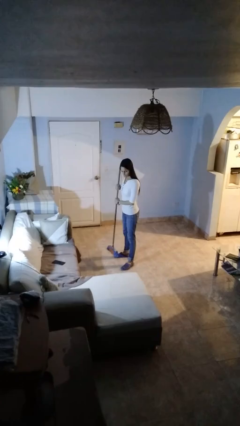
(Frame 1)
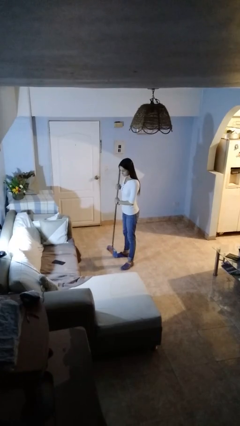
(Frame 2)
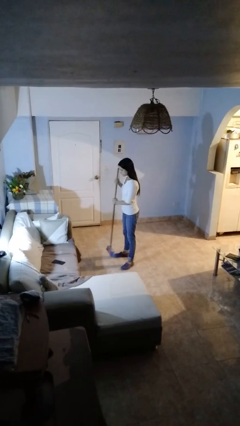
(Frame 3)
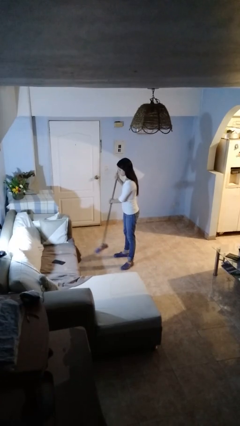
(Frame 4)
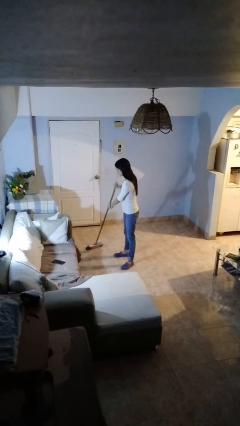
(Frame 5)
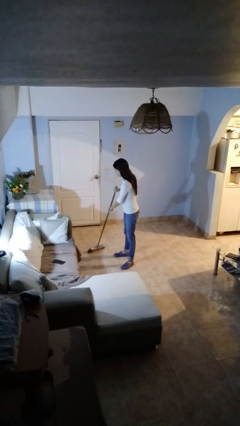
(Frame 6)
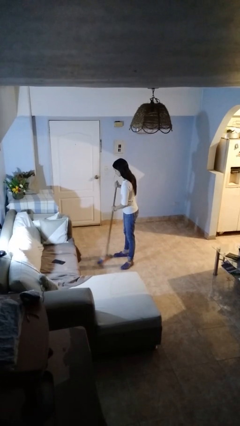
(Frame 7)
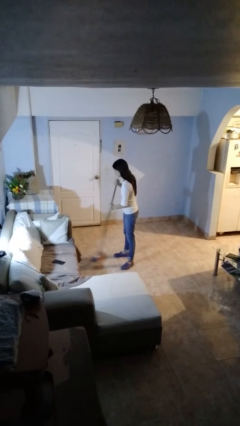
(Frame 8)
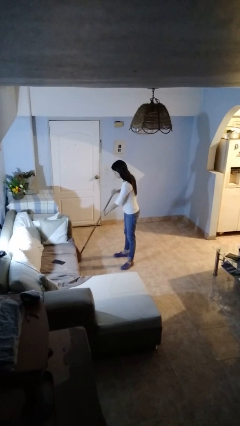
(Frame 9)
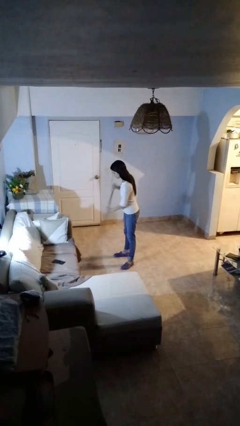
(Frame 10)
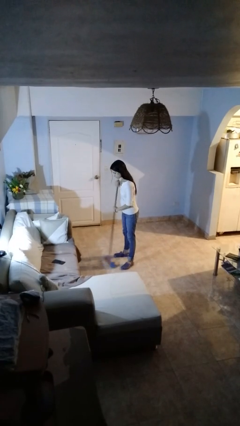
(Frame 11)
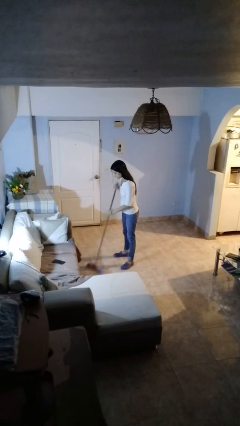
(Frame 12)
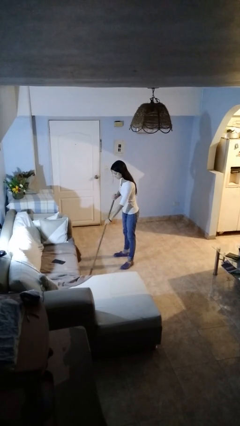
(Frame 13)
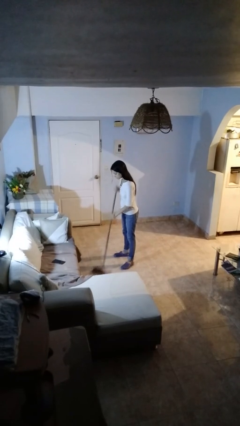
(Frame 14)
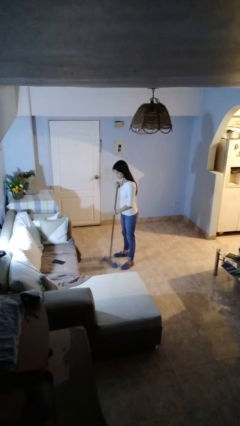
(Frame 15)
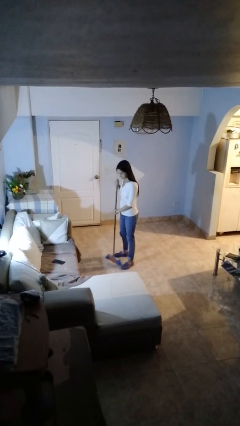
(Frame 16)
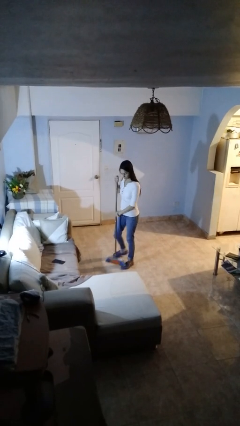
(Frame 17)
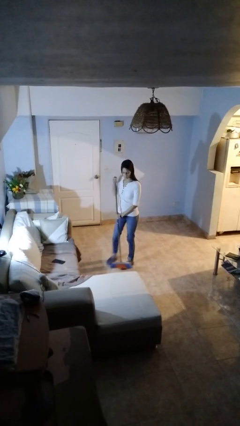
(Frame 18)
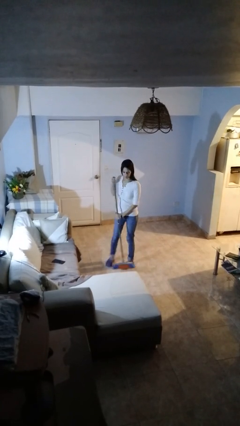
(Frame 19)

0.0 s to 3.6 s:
person sweeps floor

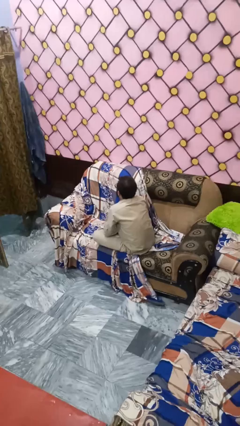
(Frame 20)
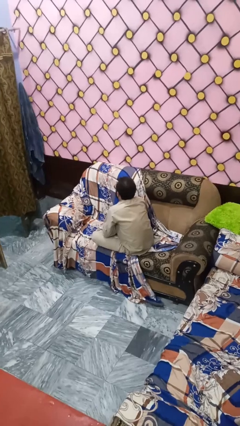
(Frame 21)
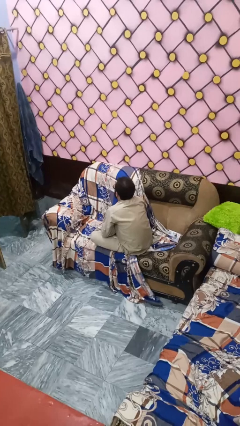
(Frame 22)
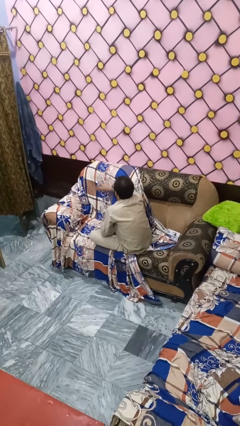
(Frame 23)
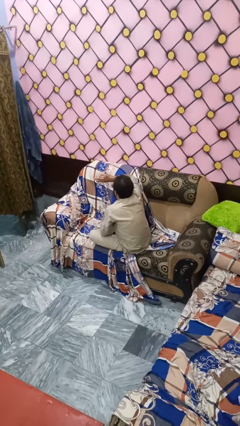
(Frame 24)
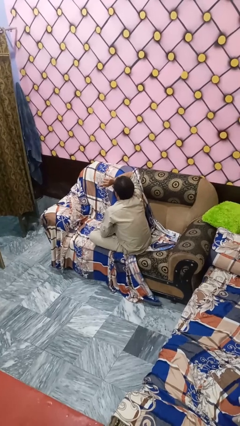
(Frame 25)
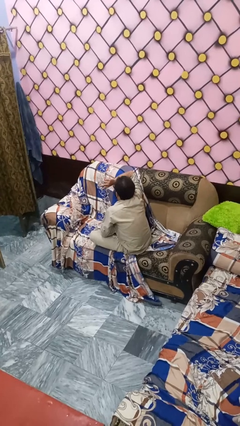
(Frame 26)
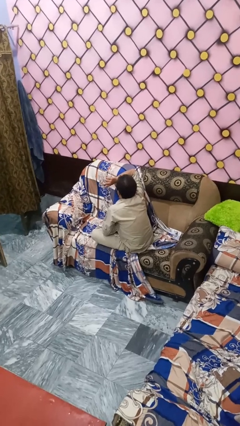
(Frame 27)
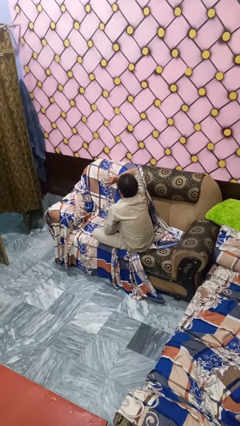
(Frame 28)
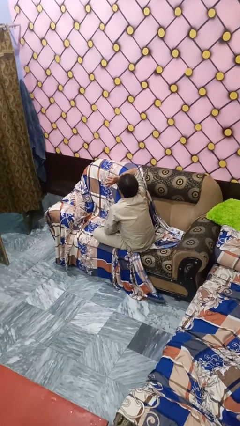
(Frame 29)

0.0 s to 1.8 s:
person gestures watch closely

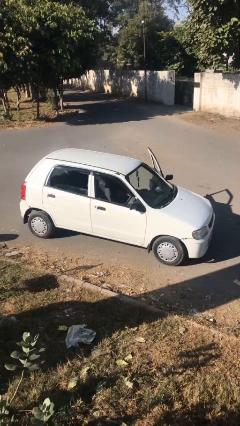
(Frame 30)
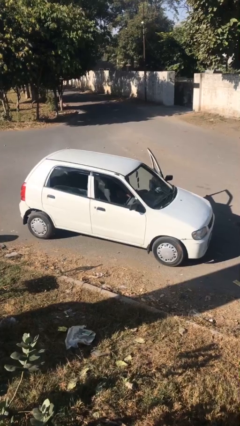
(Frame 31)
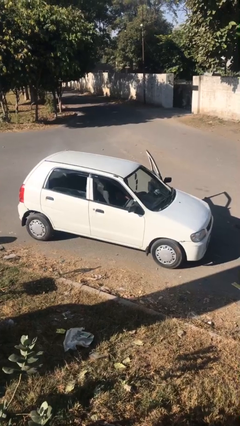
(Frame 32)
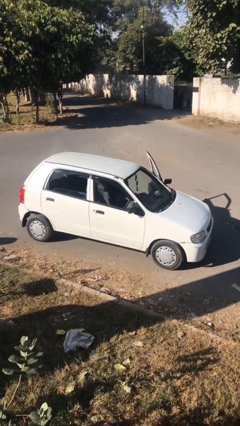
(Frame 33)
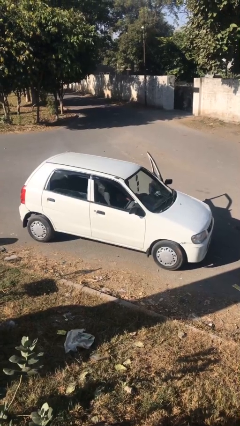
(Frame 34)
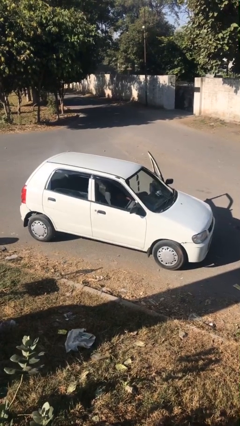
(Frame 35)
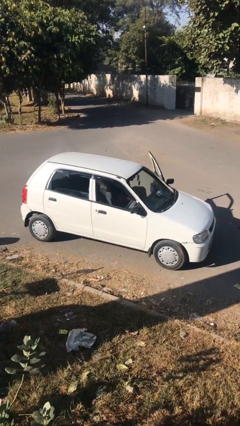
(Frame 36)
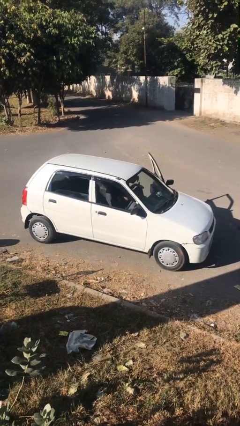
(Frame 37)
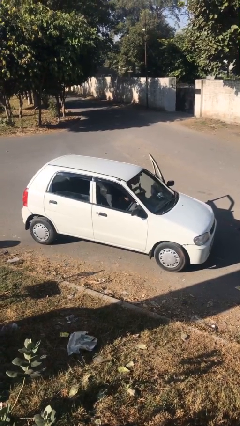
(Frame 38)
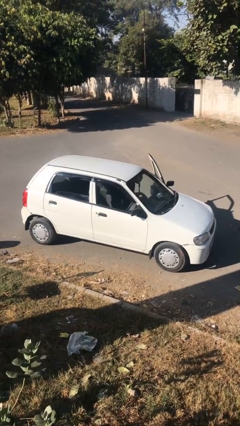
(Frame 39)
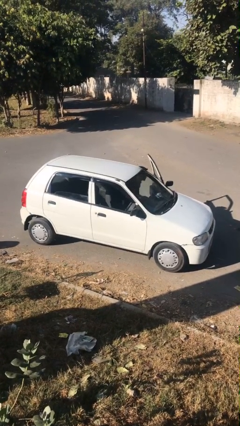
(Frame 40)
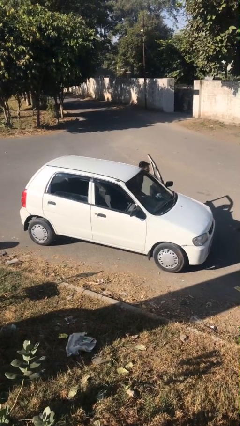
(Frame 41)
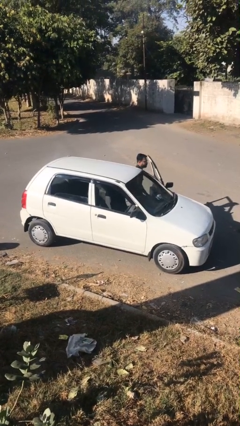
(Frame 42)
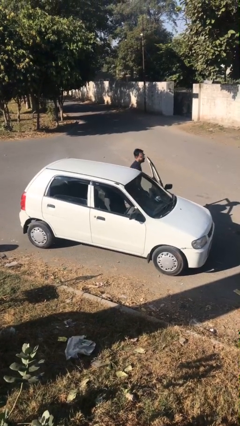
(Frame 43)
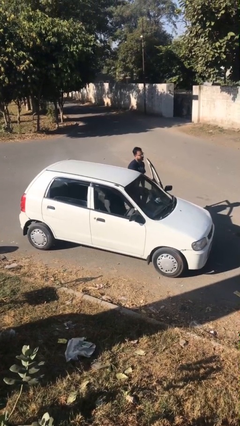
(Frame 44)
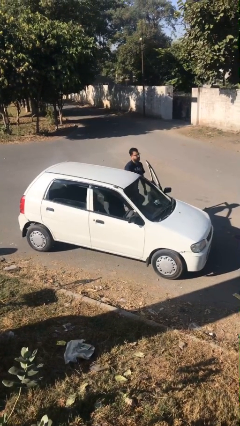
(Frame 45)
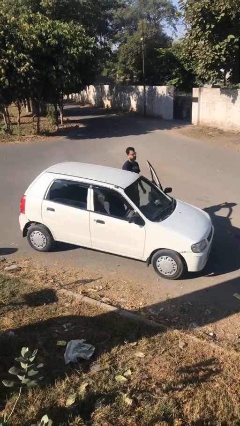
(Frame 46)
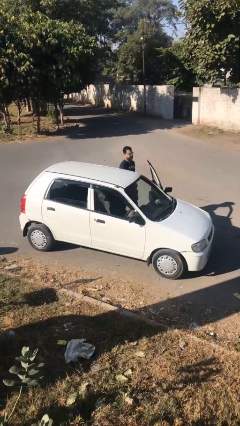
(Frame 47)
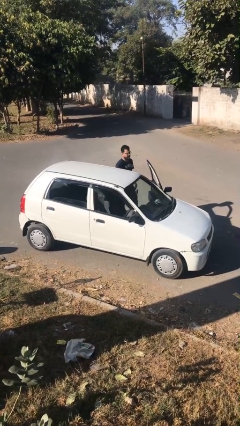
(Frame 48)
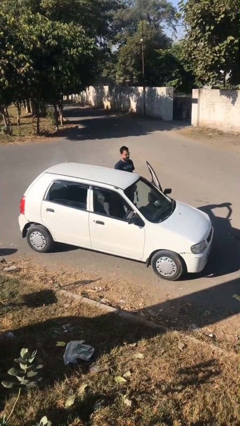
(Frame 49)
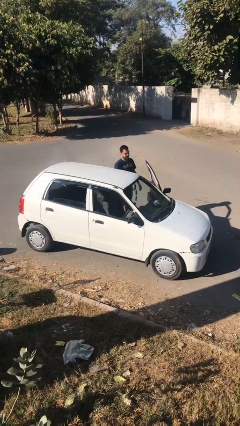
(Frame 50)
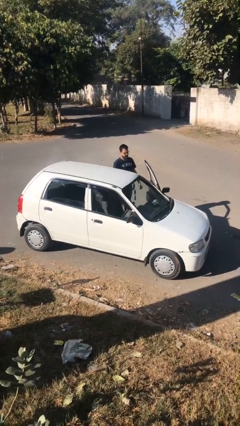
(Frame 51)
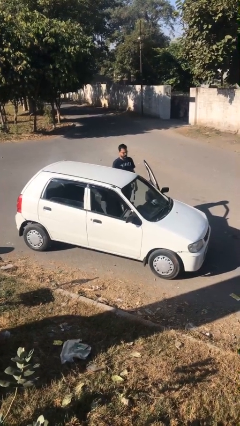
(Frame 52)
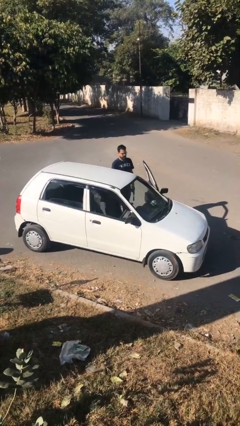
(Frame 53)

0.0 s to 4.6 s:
car drops off person

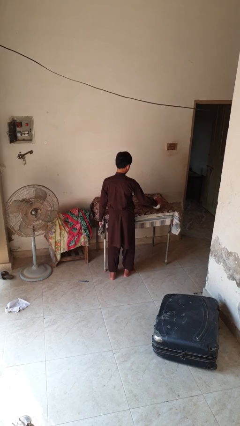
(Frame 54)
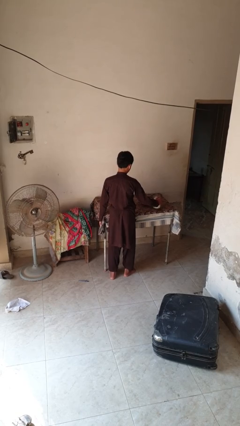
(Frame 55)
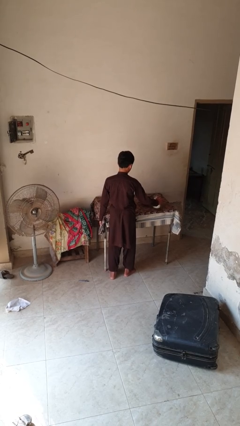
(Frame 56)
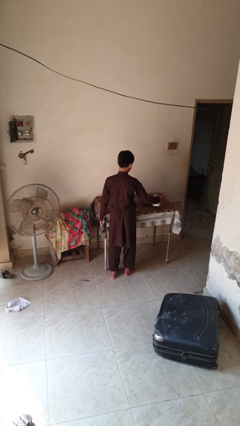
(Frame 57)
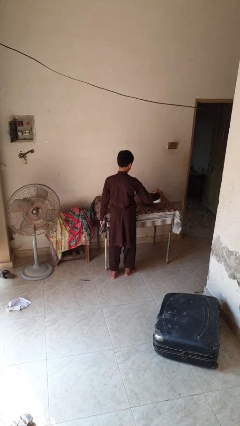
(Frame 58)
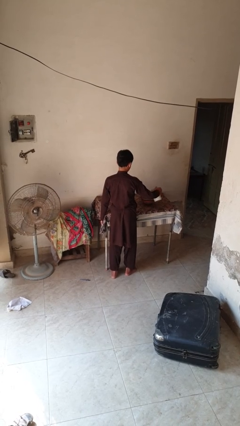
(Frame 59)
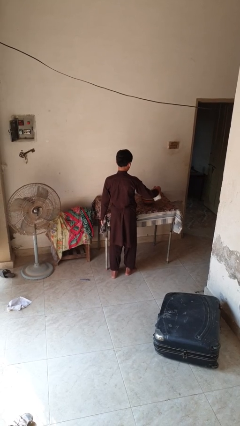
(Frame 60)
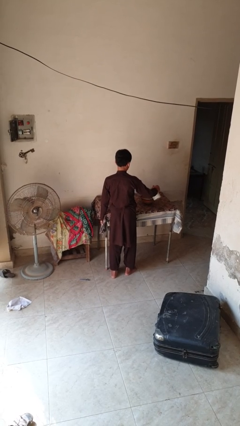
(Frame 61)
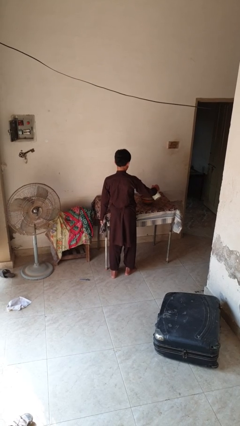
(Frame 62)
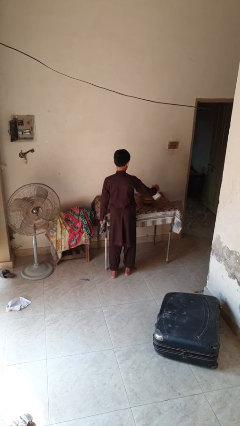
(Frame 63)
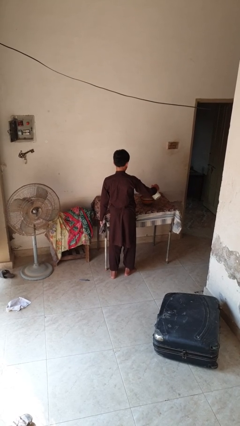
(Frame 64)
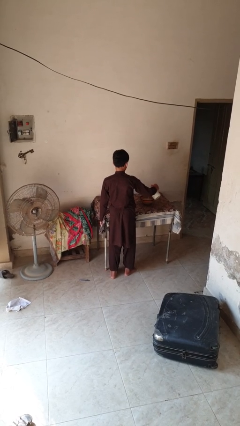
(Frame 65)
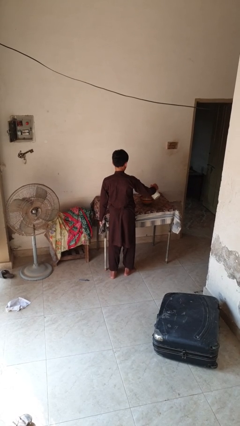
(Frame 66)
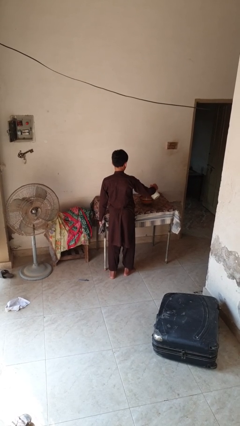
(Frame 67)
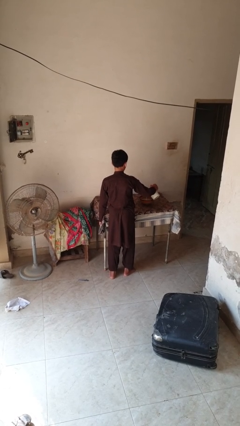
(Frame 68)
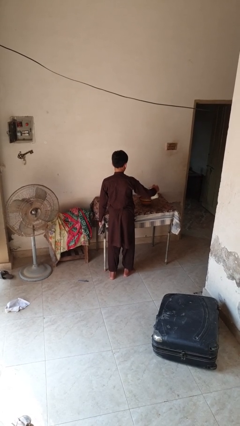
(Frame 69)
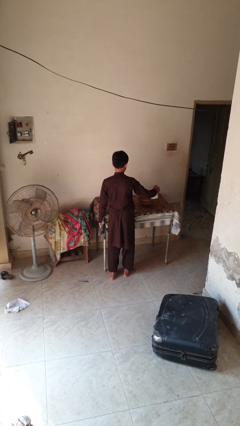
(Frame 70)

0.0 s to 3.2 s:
person pours into bowl

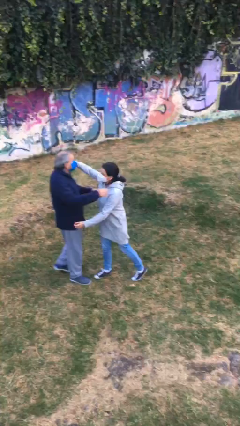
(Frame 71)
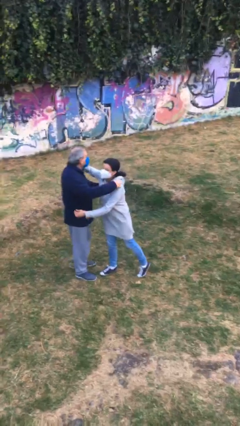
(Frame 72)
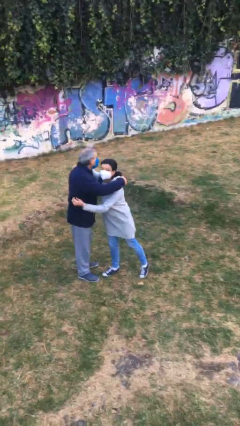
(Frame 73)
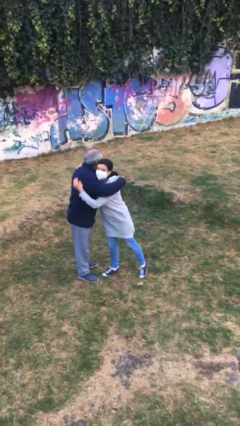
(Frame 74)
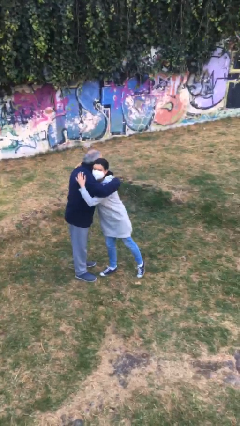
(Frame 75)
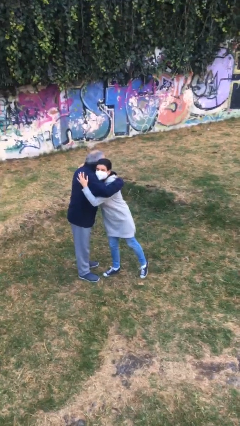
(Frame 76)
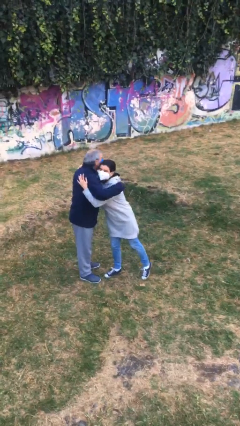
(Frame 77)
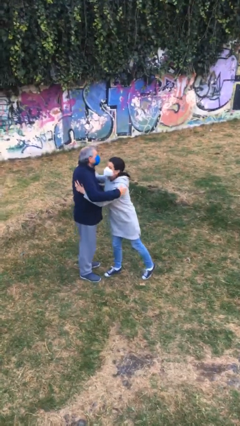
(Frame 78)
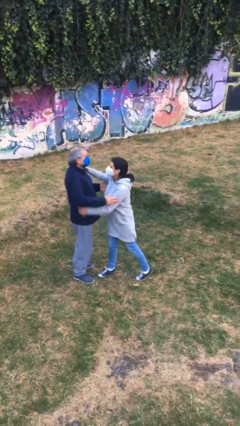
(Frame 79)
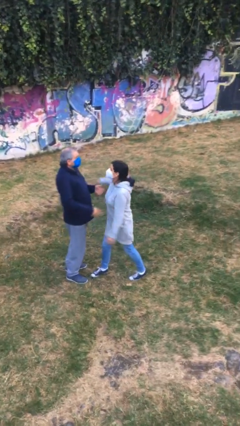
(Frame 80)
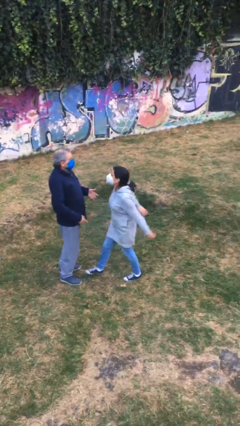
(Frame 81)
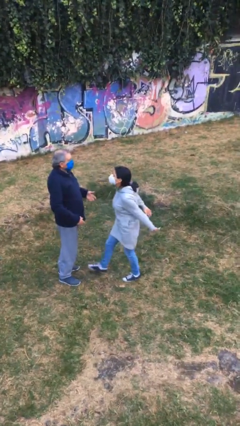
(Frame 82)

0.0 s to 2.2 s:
person embraces person

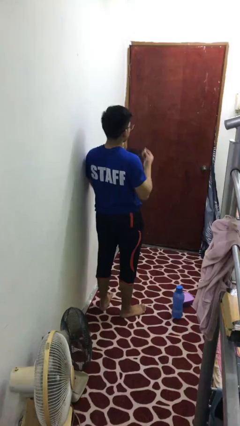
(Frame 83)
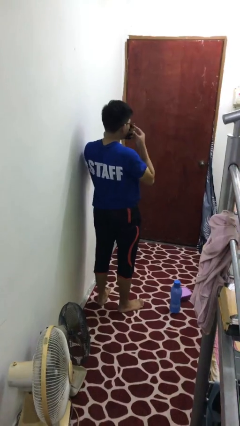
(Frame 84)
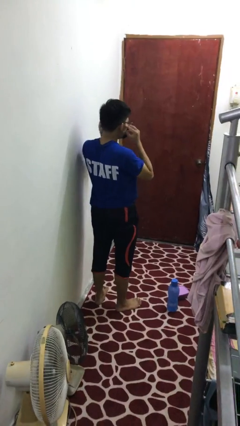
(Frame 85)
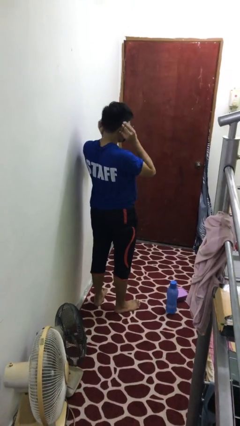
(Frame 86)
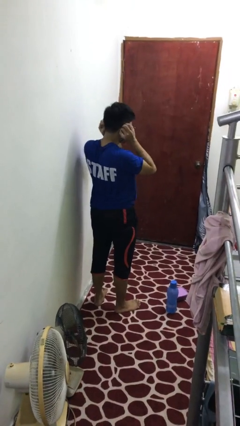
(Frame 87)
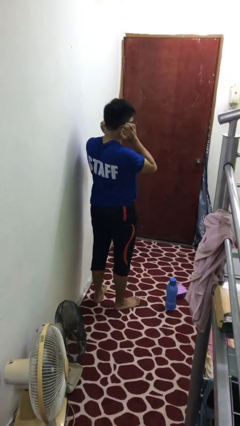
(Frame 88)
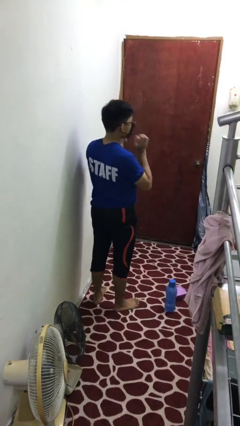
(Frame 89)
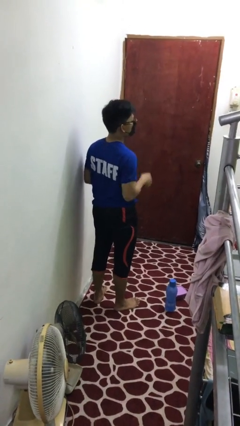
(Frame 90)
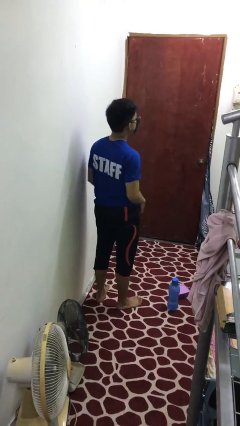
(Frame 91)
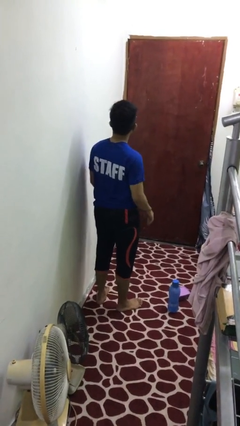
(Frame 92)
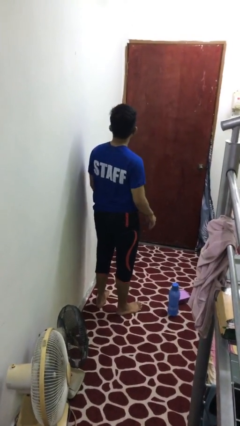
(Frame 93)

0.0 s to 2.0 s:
person puts on facemask

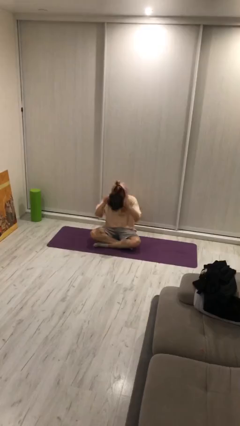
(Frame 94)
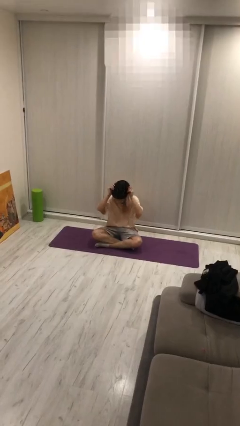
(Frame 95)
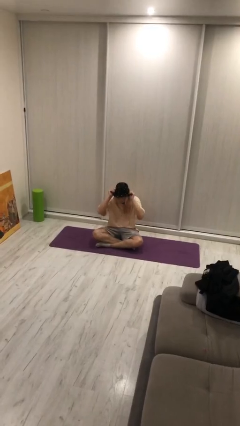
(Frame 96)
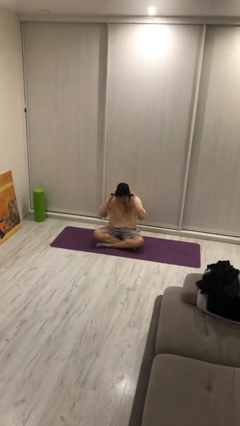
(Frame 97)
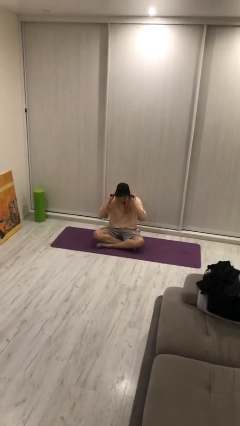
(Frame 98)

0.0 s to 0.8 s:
person puts on hat
